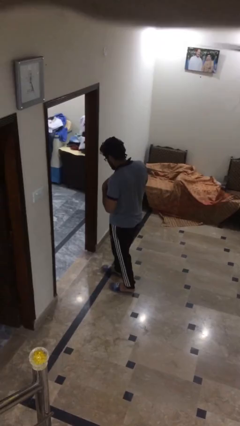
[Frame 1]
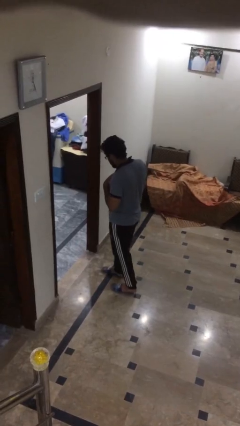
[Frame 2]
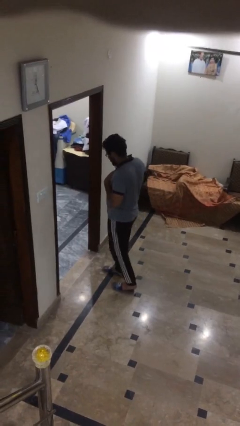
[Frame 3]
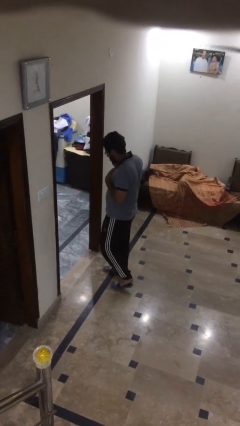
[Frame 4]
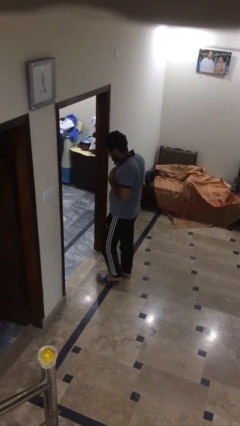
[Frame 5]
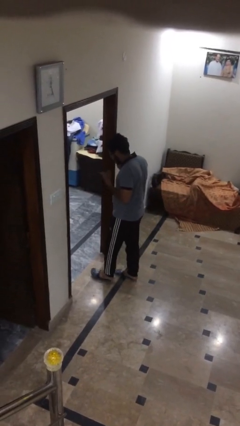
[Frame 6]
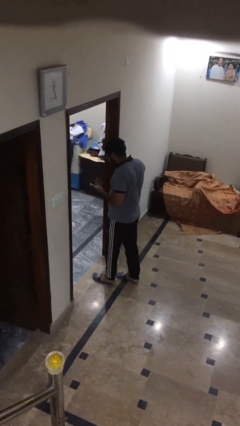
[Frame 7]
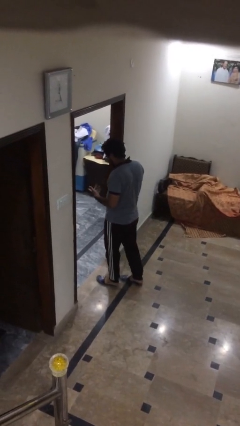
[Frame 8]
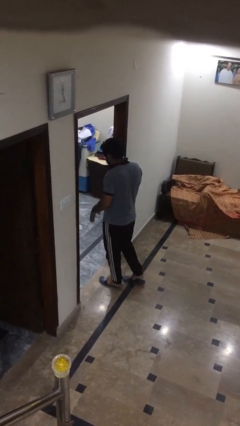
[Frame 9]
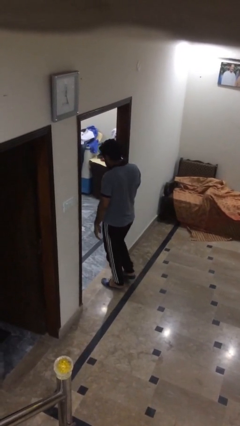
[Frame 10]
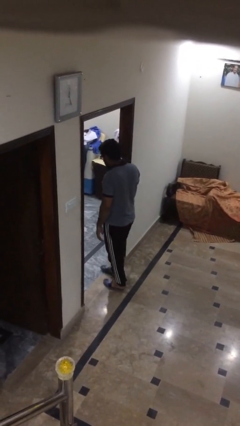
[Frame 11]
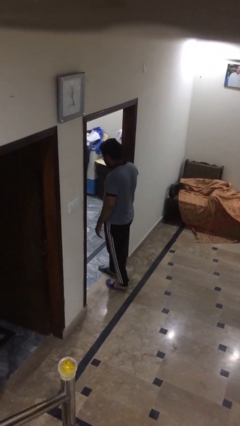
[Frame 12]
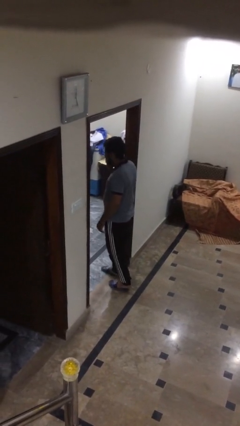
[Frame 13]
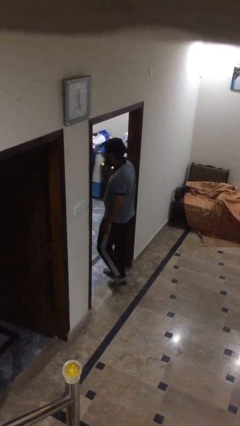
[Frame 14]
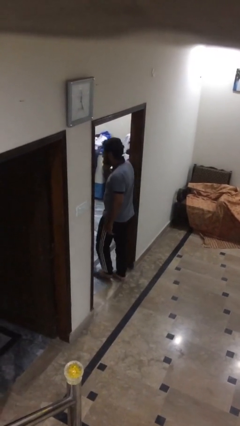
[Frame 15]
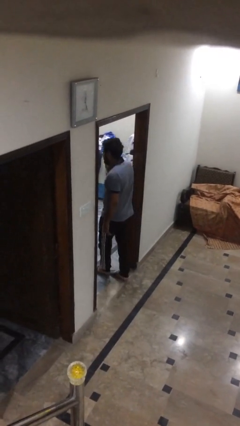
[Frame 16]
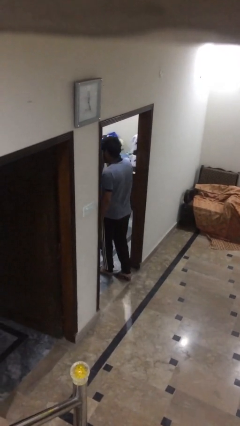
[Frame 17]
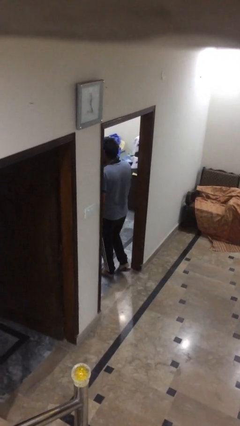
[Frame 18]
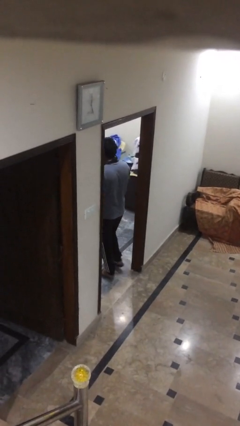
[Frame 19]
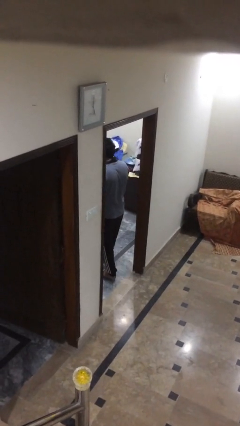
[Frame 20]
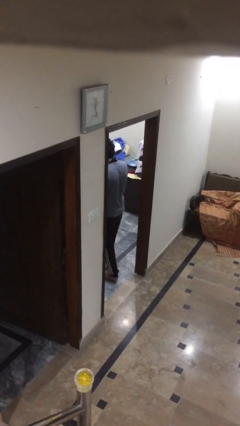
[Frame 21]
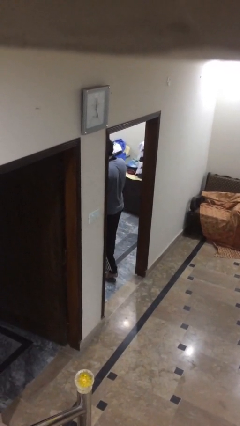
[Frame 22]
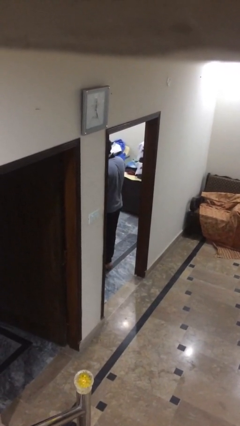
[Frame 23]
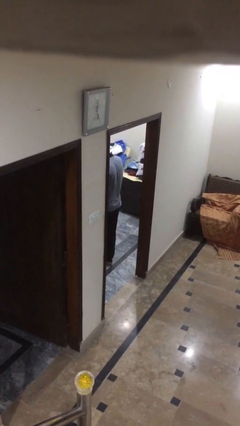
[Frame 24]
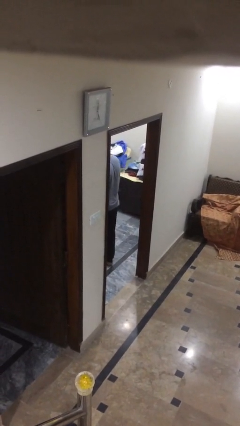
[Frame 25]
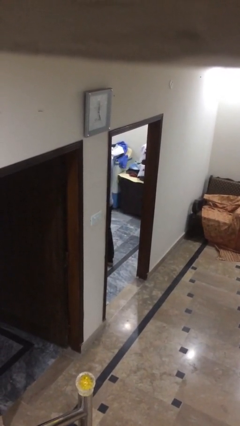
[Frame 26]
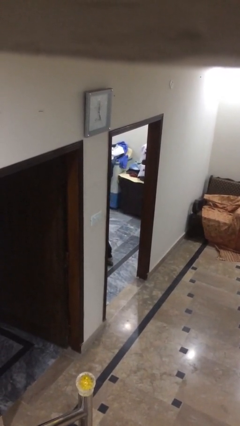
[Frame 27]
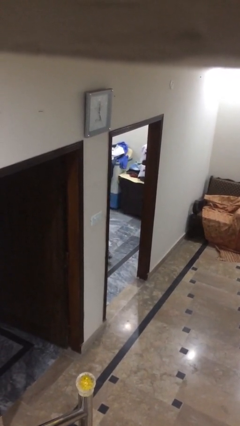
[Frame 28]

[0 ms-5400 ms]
person exits scene through structure

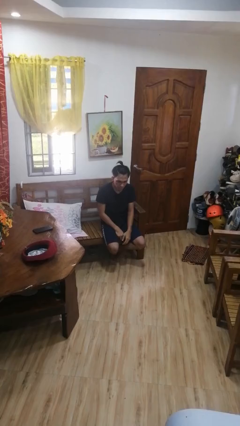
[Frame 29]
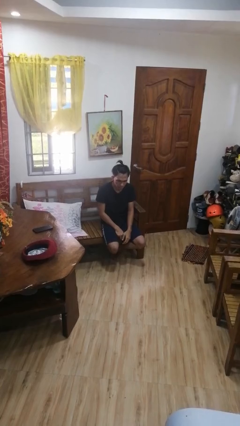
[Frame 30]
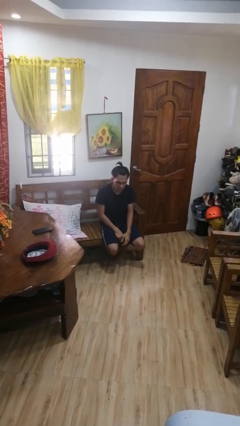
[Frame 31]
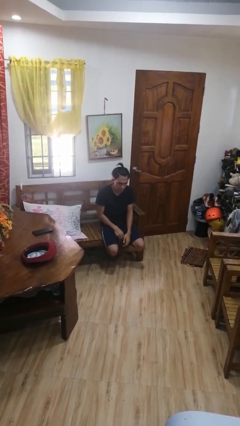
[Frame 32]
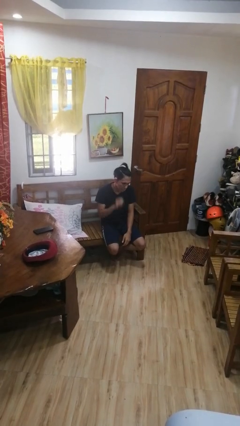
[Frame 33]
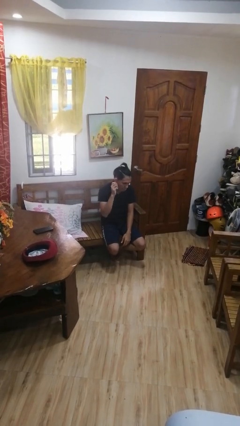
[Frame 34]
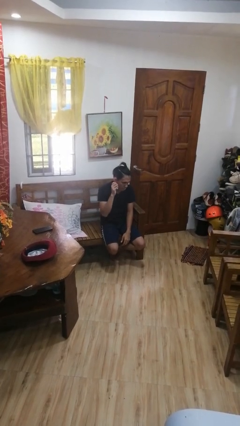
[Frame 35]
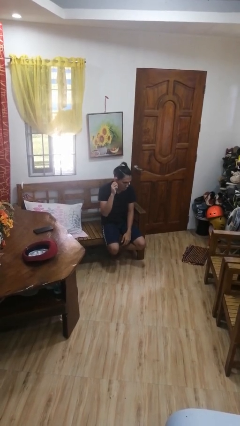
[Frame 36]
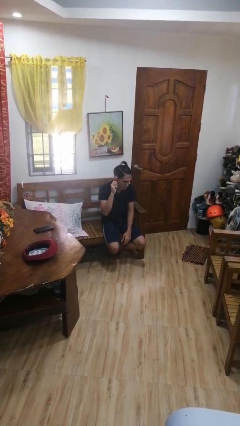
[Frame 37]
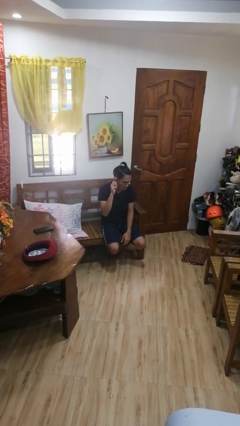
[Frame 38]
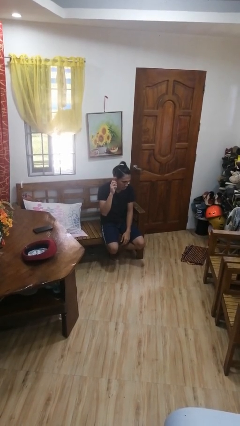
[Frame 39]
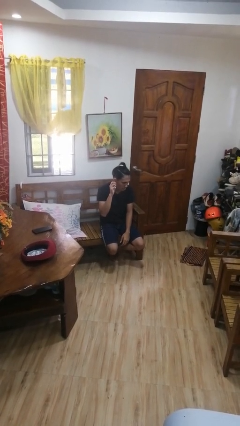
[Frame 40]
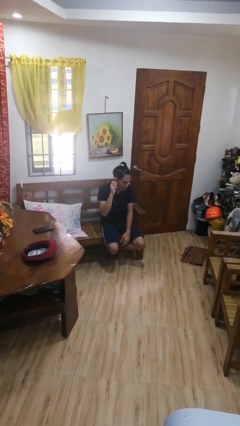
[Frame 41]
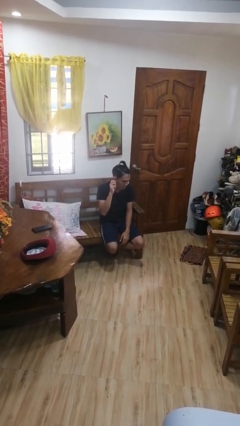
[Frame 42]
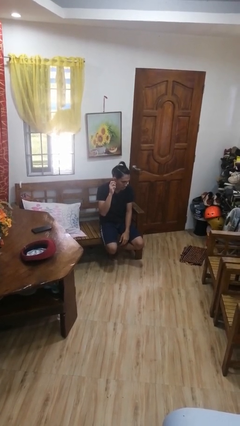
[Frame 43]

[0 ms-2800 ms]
person touches earlobe

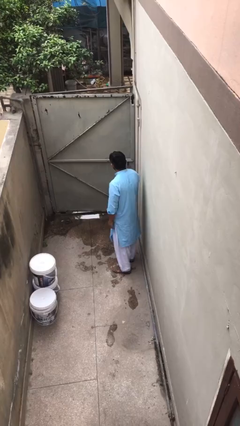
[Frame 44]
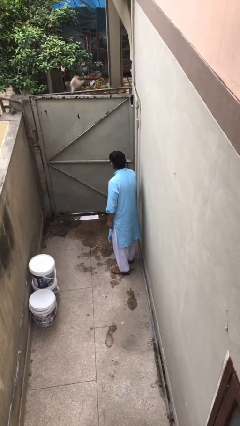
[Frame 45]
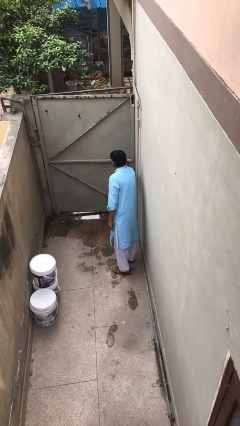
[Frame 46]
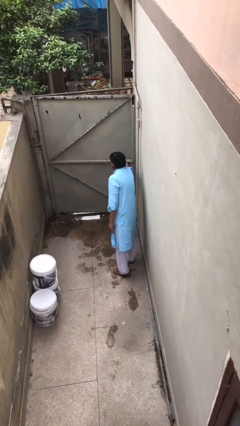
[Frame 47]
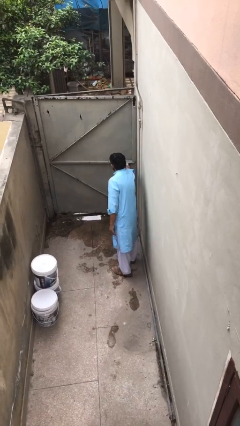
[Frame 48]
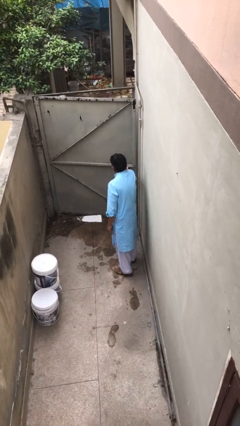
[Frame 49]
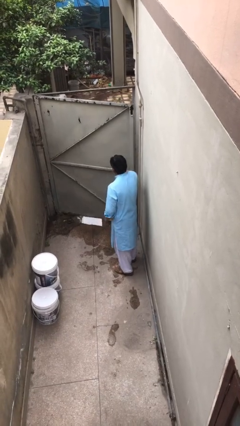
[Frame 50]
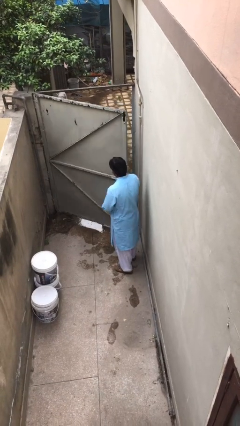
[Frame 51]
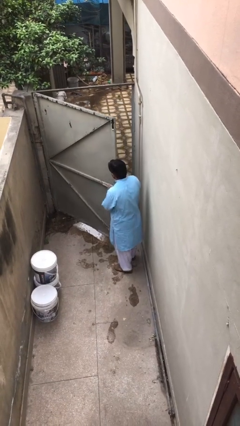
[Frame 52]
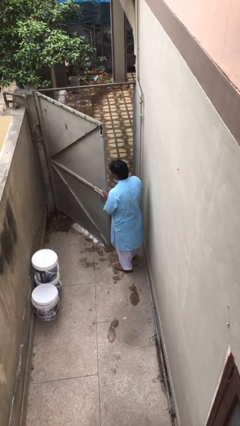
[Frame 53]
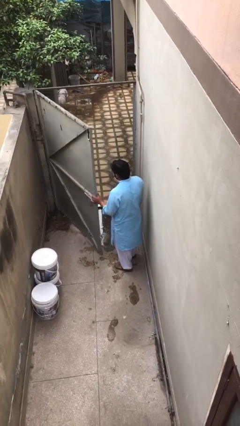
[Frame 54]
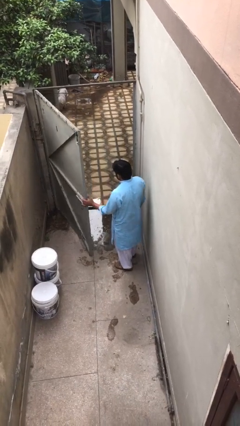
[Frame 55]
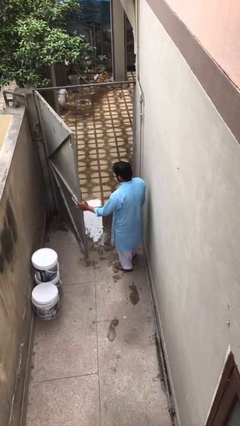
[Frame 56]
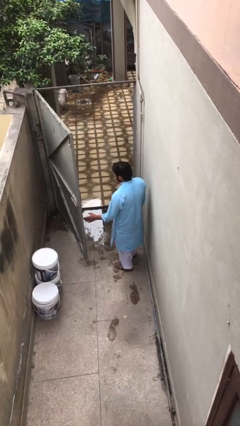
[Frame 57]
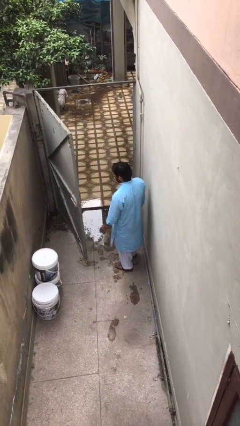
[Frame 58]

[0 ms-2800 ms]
person opens facility door

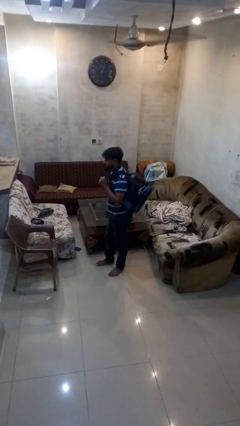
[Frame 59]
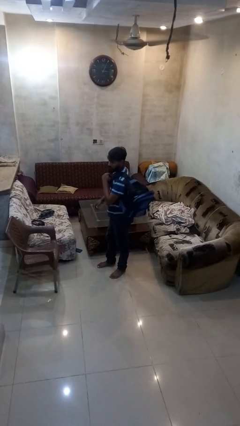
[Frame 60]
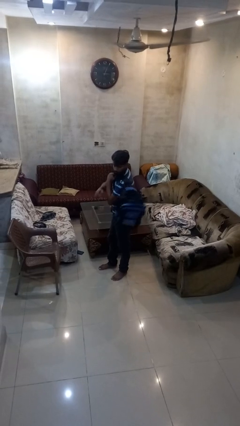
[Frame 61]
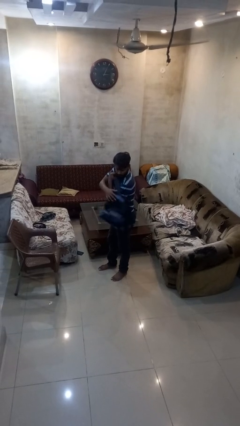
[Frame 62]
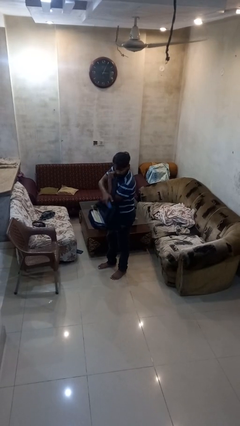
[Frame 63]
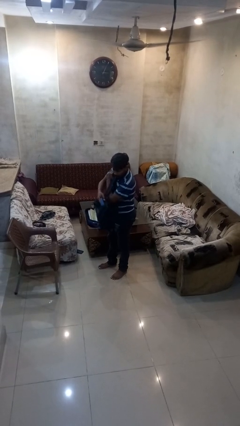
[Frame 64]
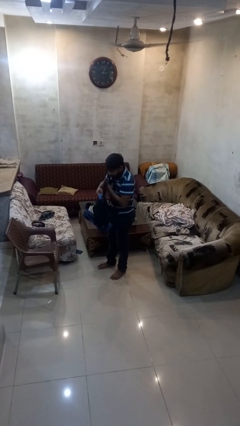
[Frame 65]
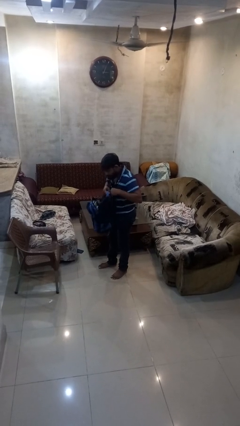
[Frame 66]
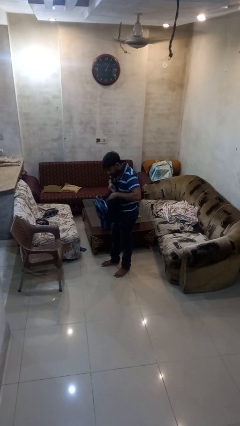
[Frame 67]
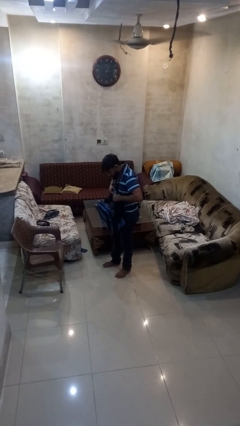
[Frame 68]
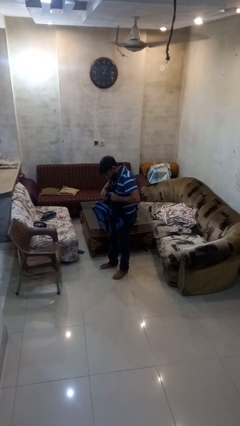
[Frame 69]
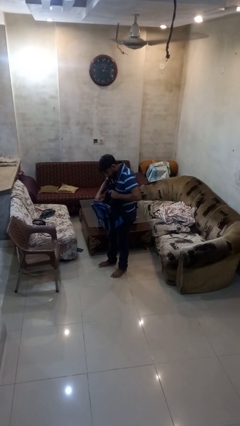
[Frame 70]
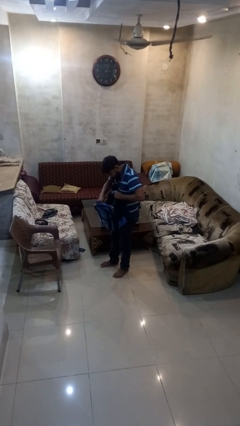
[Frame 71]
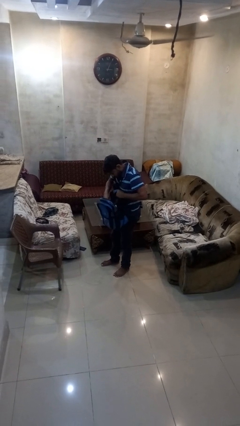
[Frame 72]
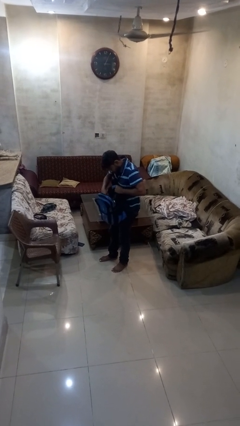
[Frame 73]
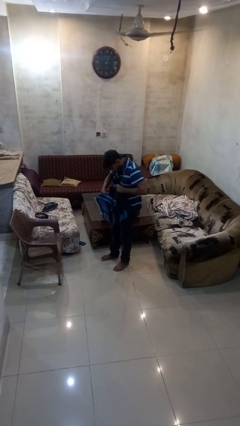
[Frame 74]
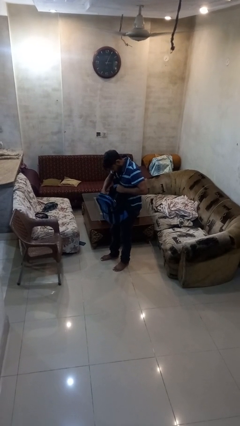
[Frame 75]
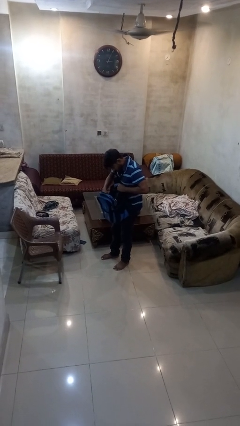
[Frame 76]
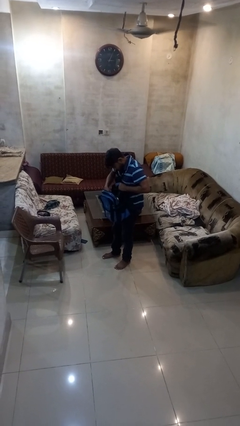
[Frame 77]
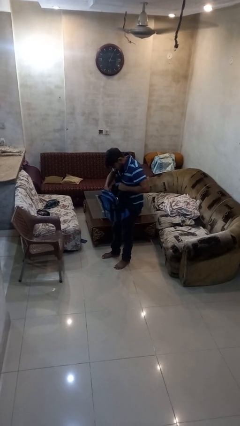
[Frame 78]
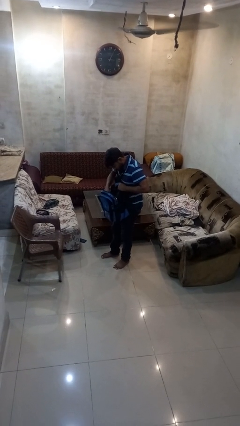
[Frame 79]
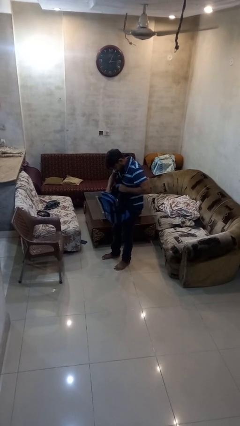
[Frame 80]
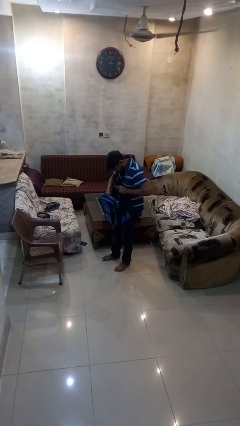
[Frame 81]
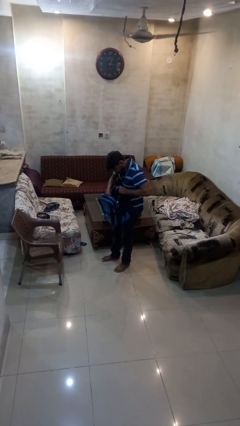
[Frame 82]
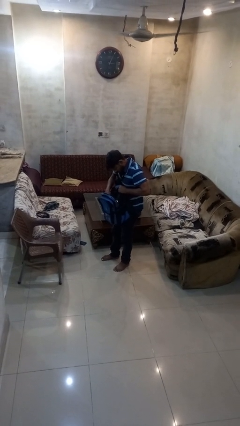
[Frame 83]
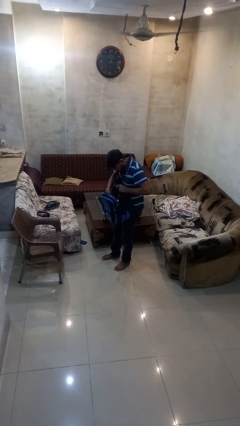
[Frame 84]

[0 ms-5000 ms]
person searches in backpack

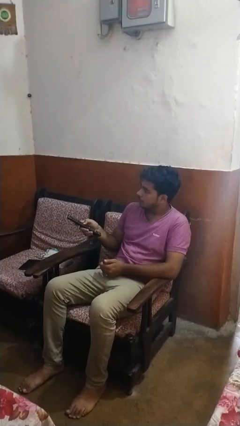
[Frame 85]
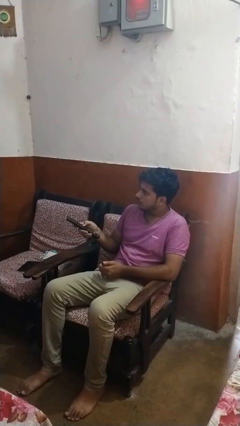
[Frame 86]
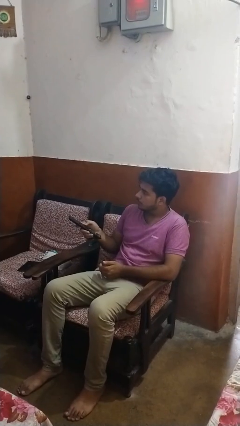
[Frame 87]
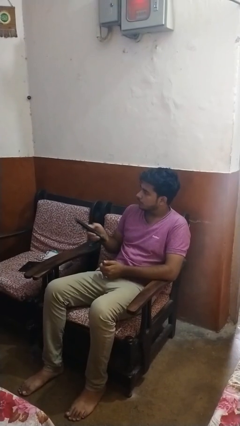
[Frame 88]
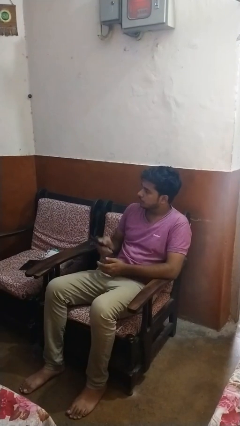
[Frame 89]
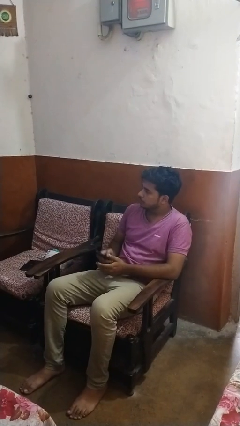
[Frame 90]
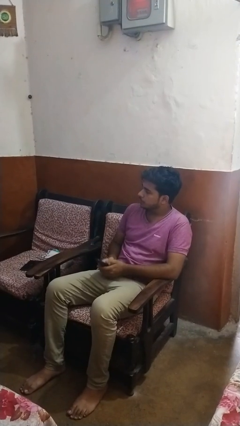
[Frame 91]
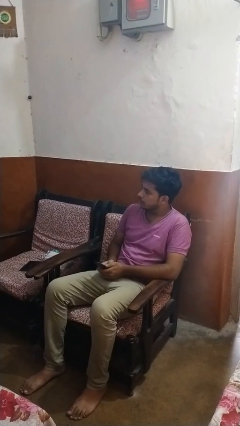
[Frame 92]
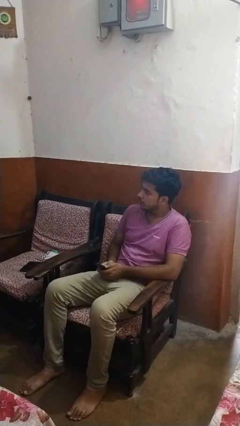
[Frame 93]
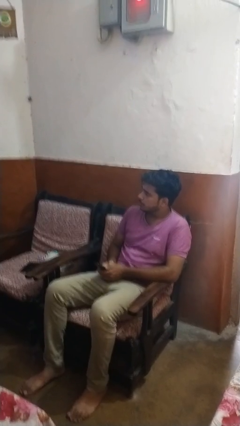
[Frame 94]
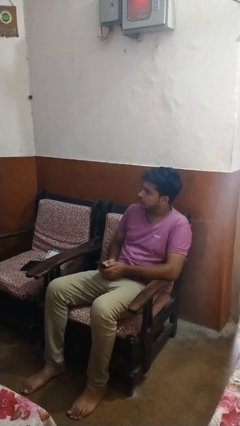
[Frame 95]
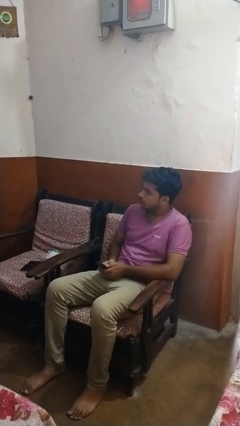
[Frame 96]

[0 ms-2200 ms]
person uses television remote
